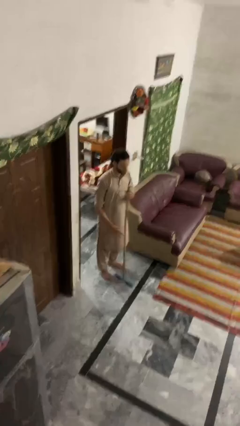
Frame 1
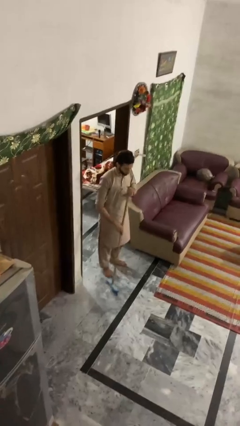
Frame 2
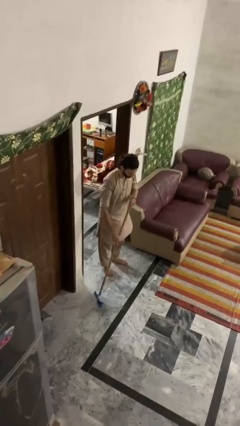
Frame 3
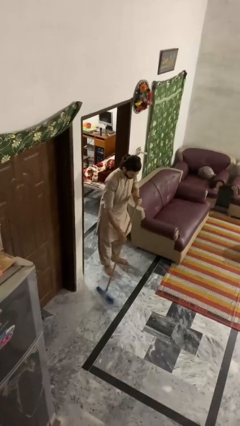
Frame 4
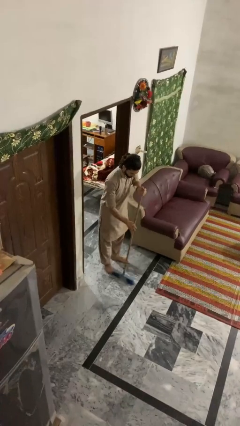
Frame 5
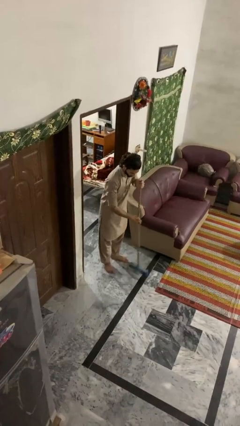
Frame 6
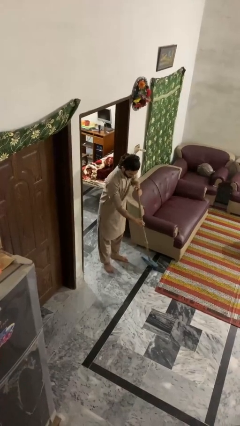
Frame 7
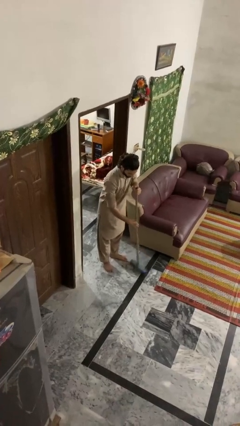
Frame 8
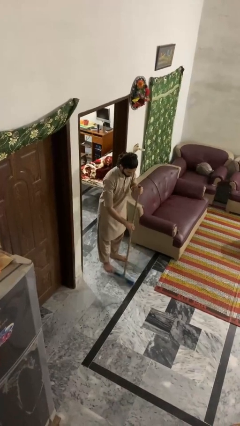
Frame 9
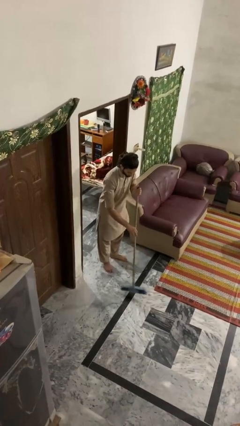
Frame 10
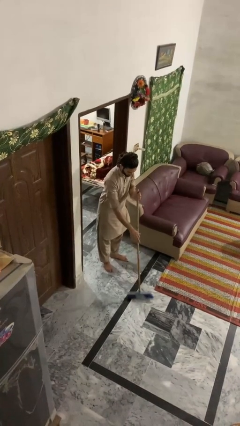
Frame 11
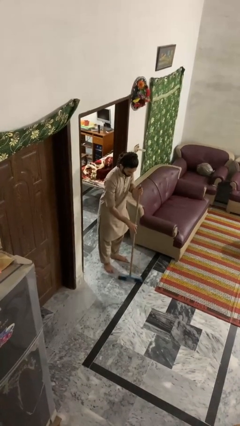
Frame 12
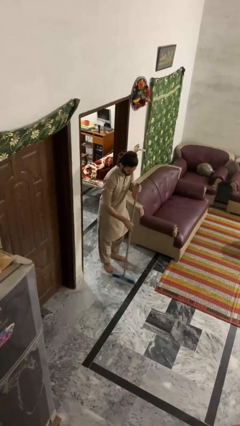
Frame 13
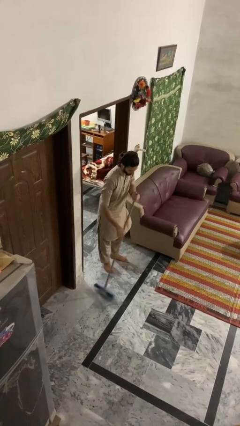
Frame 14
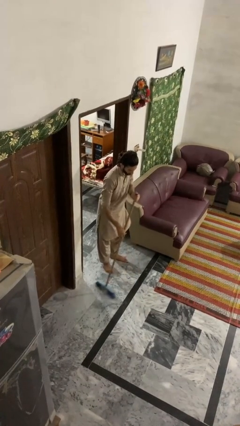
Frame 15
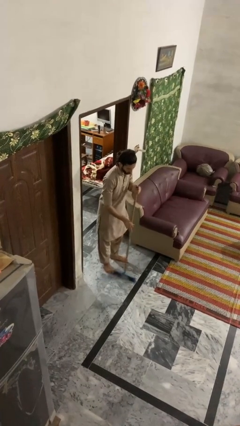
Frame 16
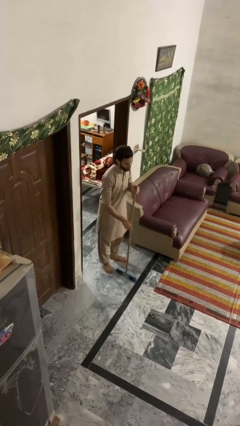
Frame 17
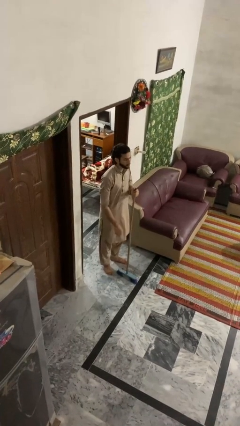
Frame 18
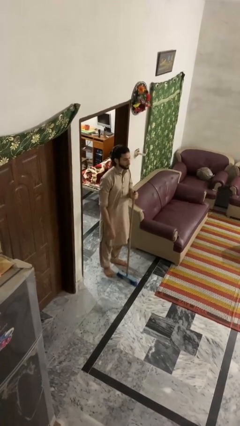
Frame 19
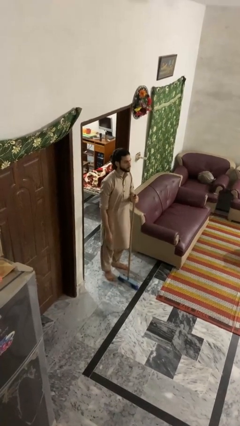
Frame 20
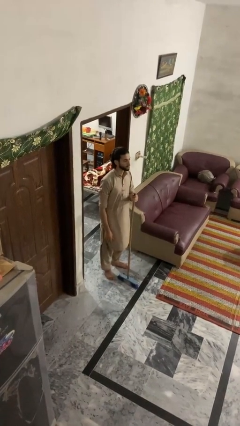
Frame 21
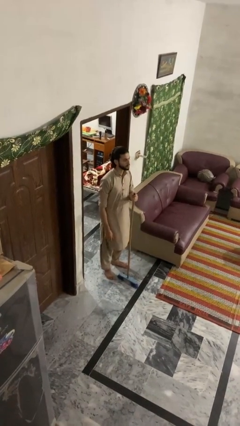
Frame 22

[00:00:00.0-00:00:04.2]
person sweeps floor

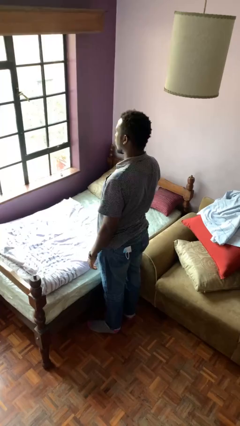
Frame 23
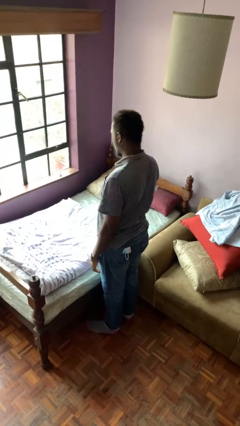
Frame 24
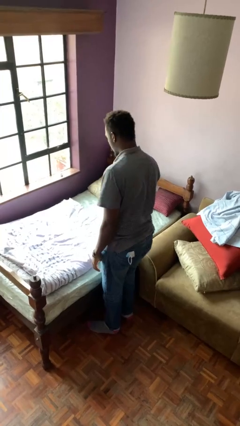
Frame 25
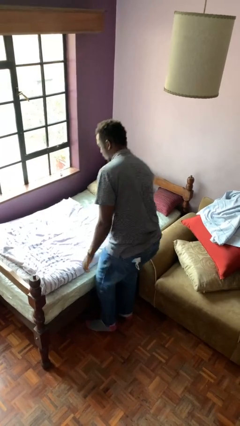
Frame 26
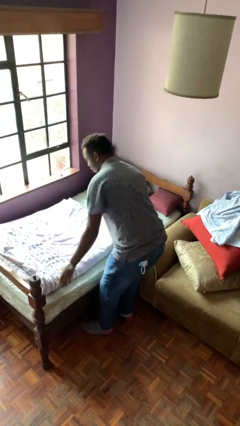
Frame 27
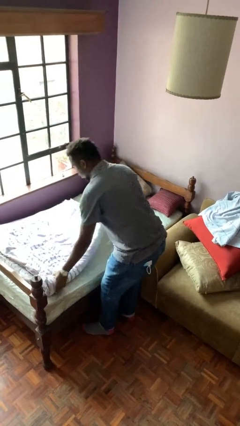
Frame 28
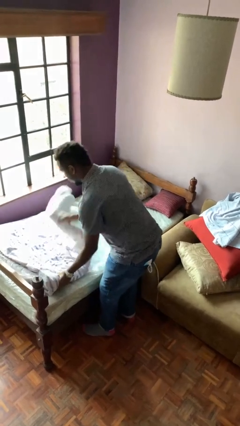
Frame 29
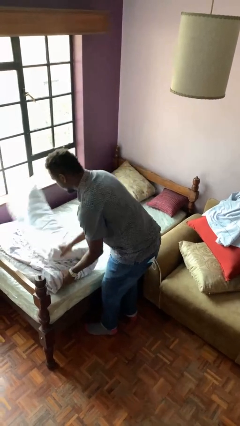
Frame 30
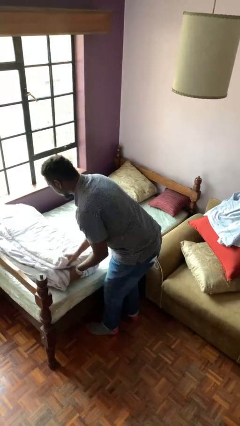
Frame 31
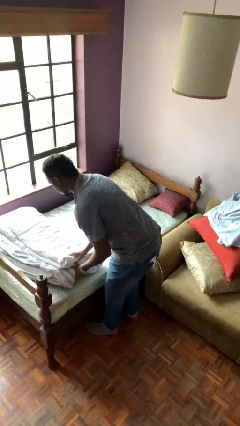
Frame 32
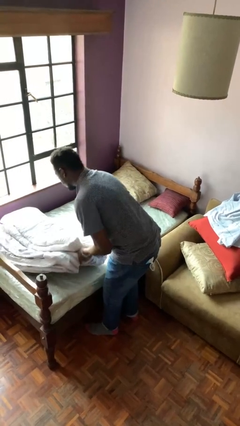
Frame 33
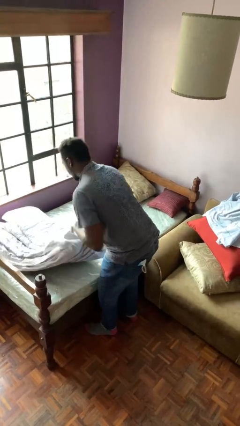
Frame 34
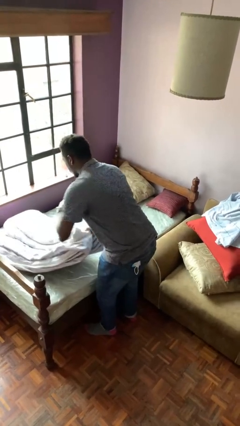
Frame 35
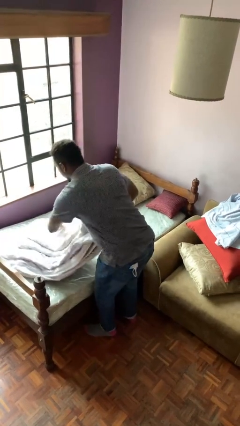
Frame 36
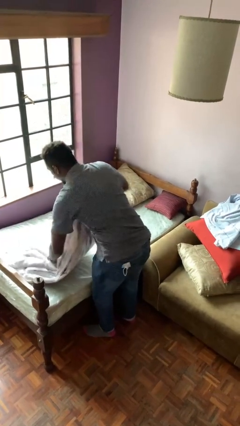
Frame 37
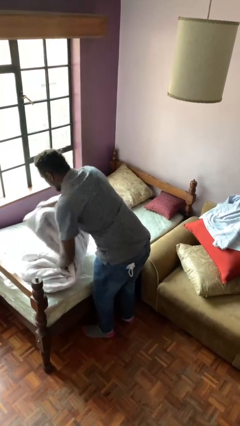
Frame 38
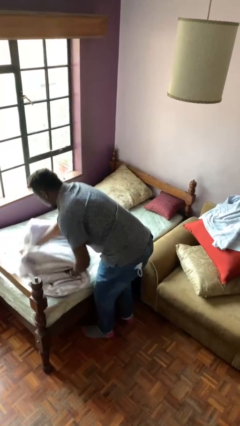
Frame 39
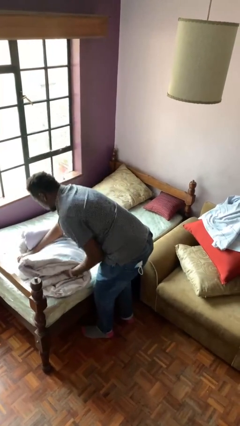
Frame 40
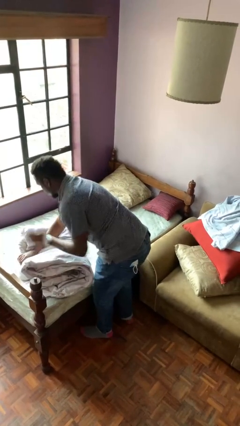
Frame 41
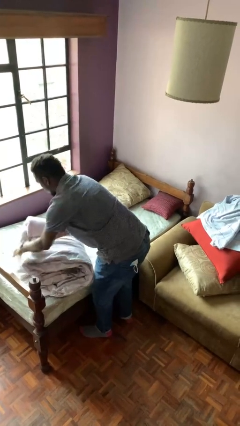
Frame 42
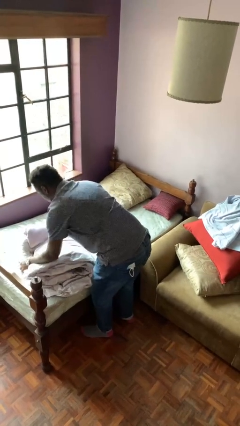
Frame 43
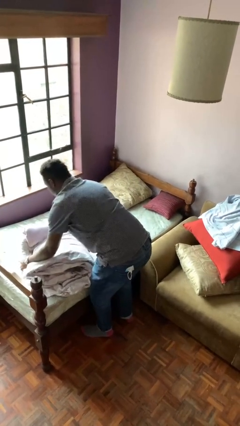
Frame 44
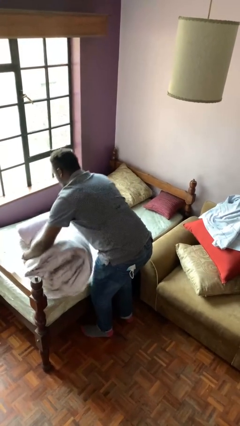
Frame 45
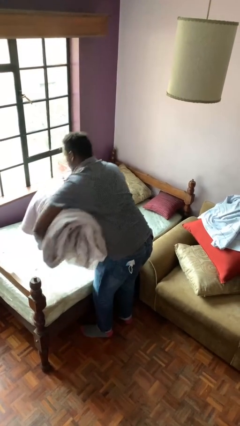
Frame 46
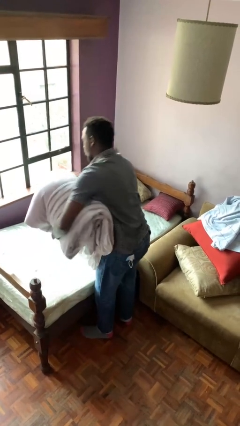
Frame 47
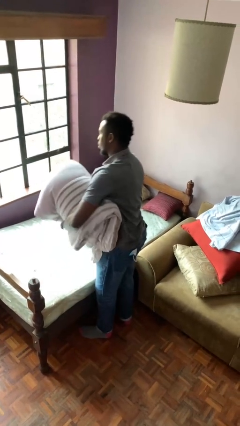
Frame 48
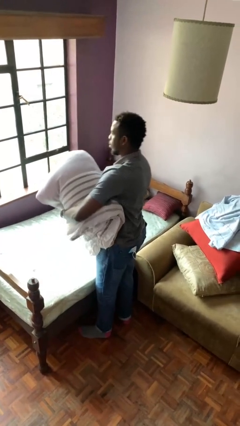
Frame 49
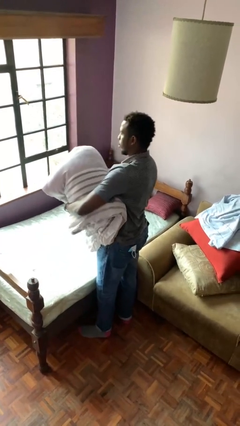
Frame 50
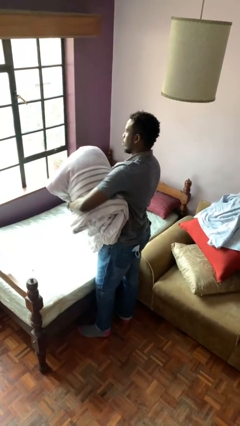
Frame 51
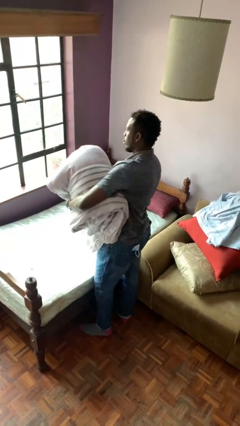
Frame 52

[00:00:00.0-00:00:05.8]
person folds blanket

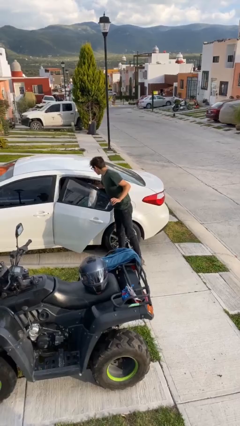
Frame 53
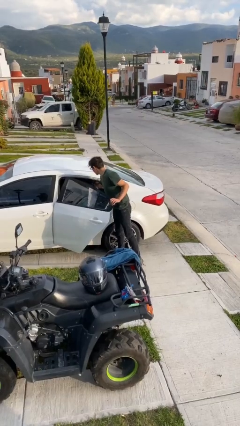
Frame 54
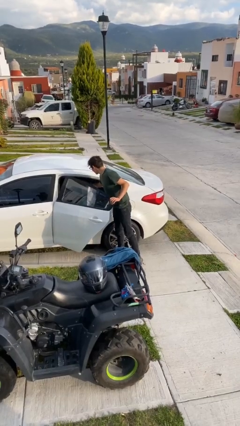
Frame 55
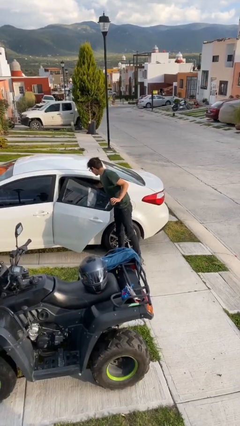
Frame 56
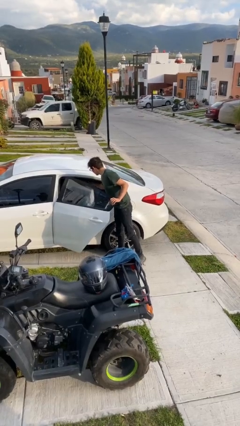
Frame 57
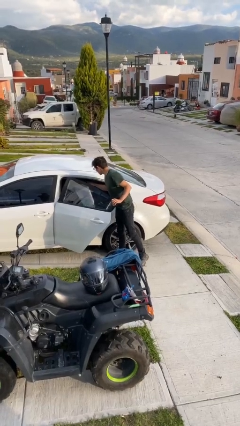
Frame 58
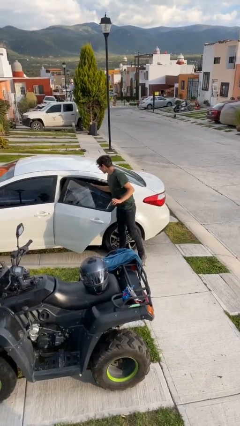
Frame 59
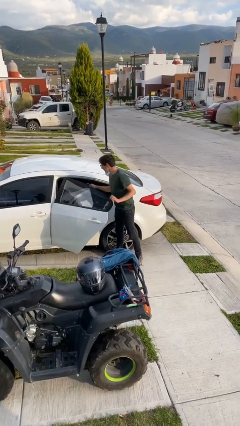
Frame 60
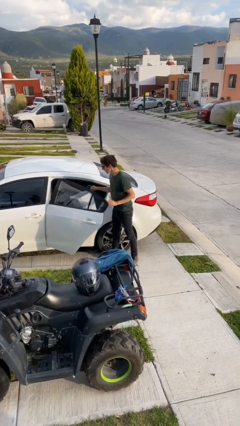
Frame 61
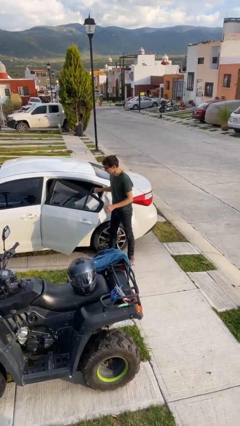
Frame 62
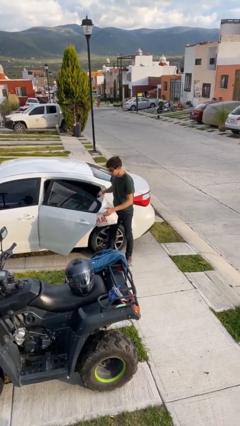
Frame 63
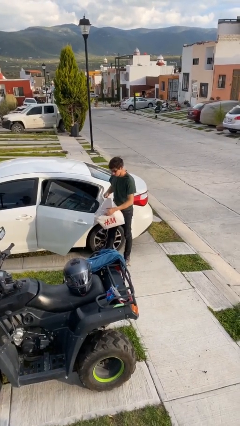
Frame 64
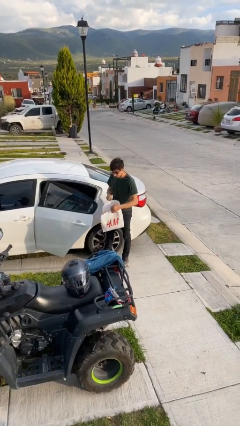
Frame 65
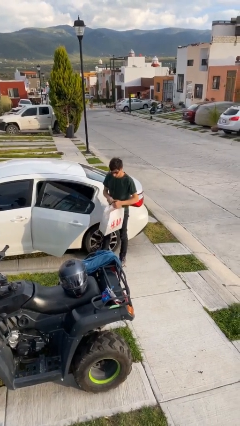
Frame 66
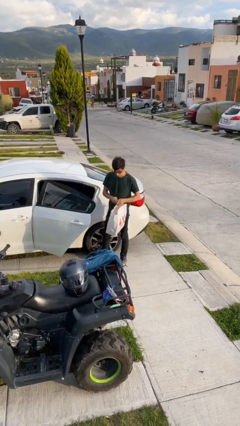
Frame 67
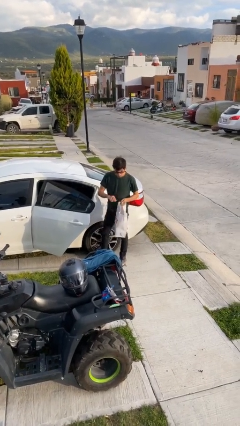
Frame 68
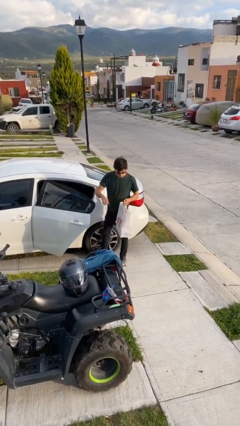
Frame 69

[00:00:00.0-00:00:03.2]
person unloads car

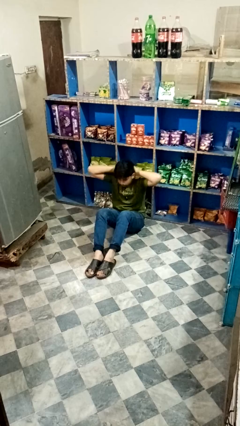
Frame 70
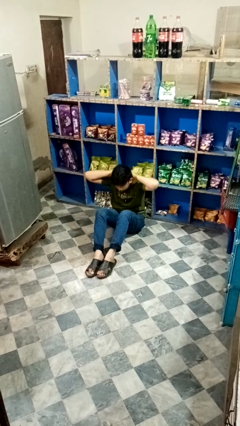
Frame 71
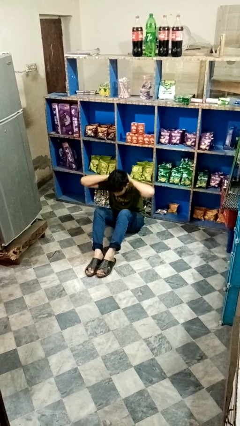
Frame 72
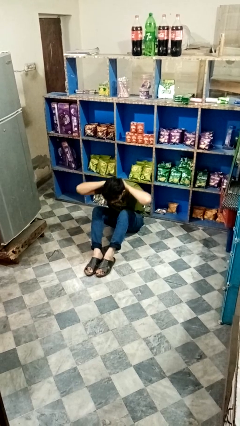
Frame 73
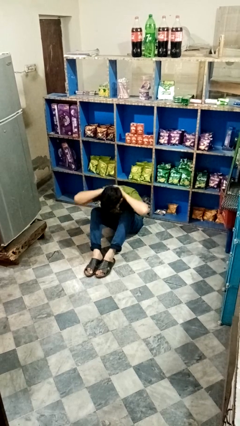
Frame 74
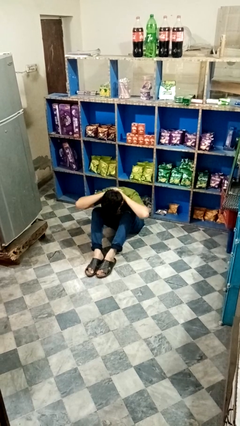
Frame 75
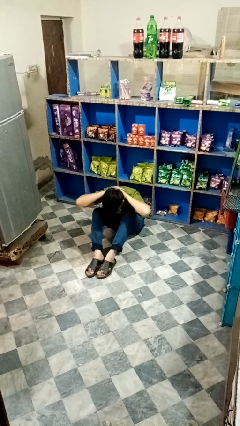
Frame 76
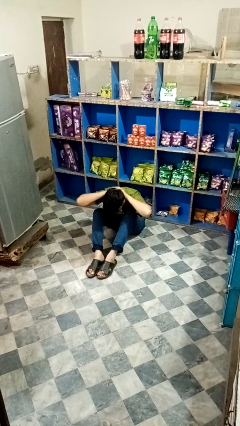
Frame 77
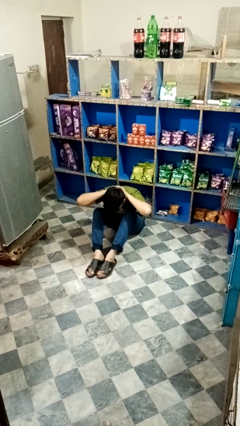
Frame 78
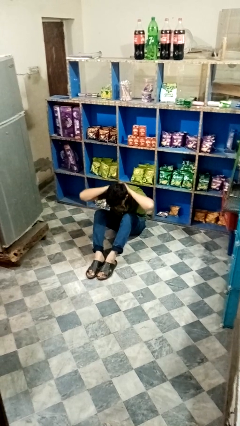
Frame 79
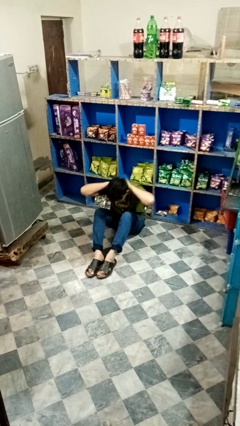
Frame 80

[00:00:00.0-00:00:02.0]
person exercises with situp

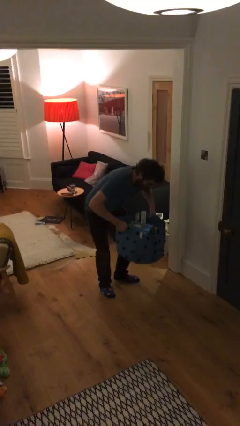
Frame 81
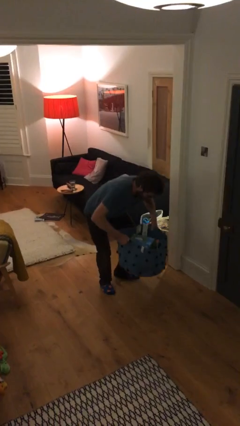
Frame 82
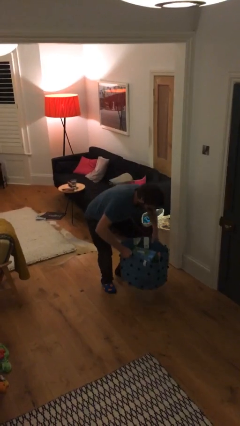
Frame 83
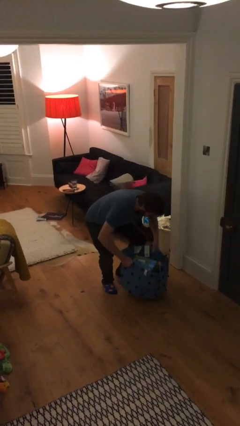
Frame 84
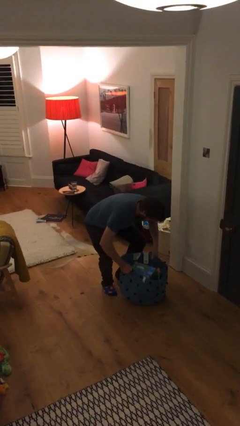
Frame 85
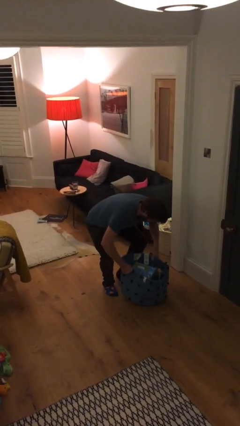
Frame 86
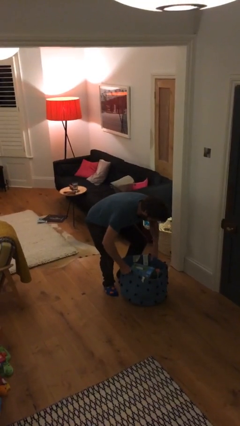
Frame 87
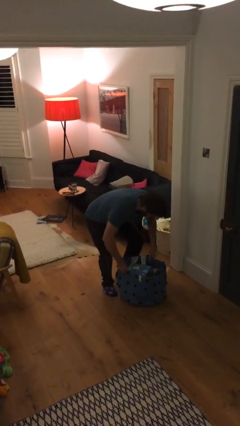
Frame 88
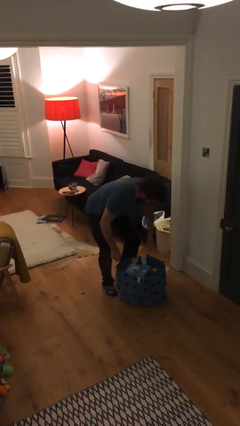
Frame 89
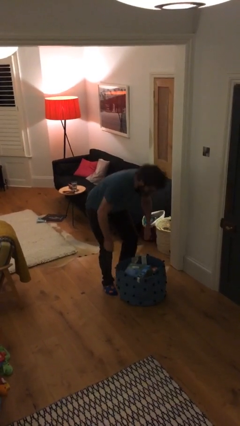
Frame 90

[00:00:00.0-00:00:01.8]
person puts down object on floor
